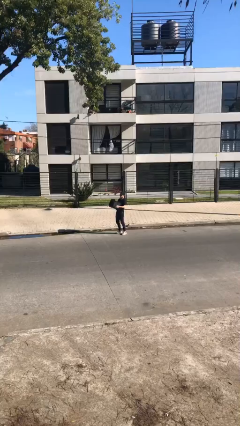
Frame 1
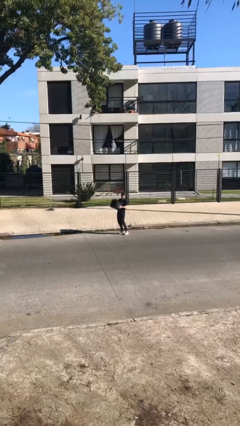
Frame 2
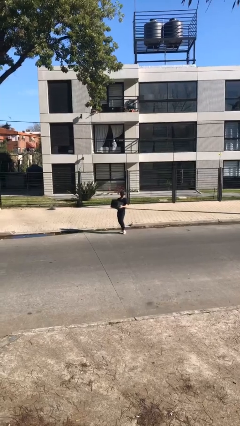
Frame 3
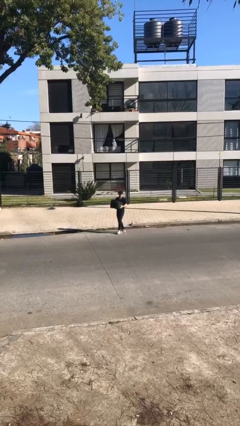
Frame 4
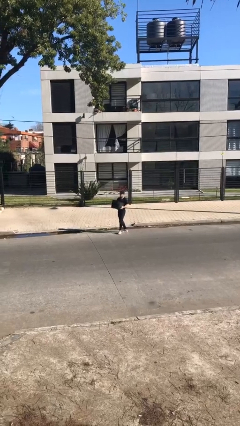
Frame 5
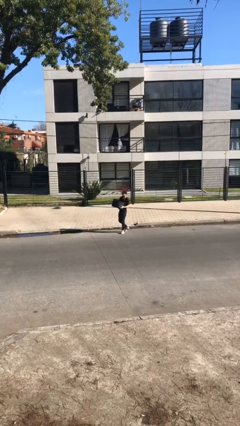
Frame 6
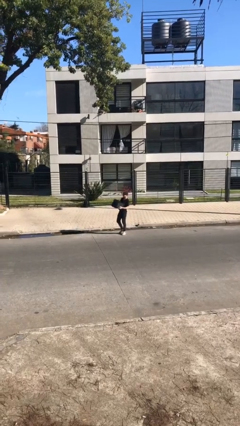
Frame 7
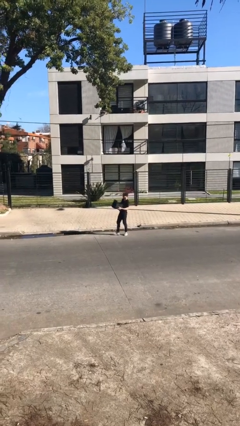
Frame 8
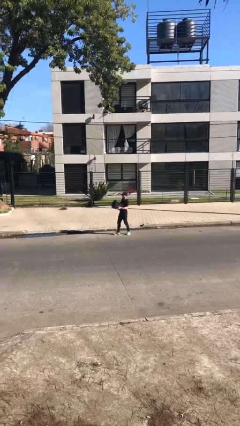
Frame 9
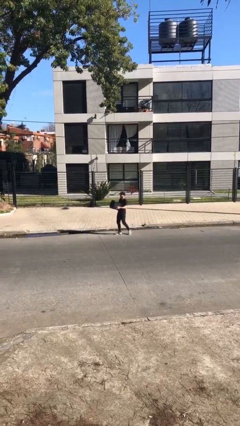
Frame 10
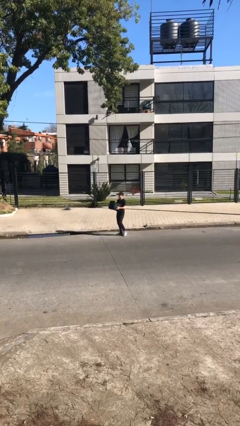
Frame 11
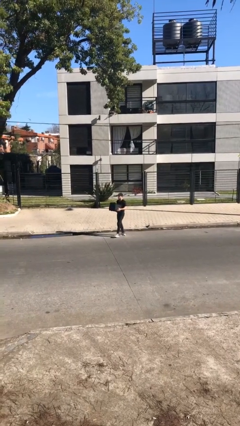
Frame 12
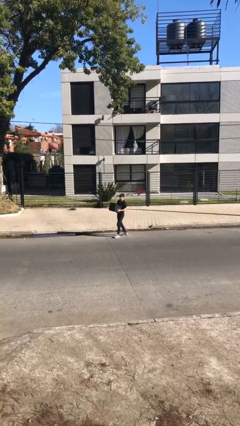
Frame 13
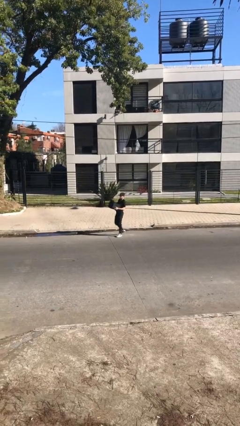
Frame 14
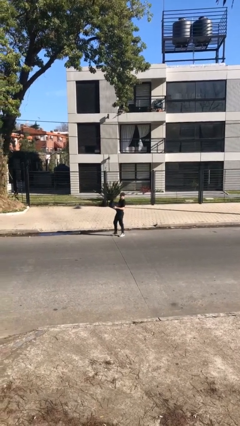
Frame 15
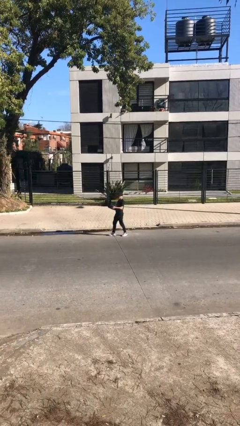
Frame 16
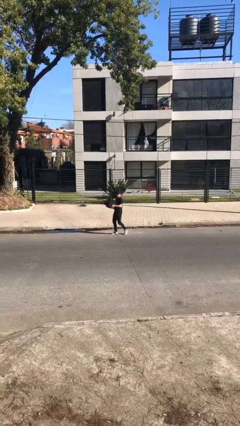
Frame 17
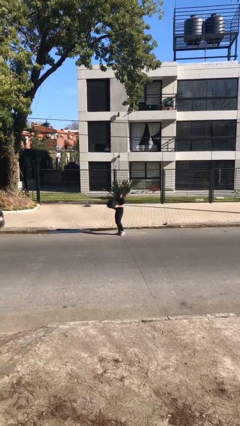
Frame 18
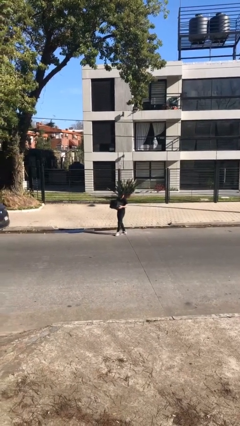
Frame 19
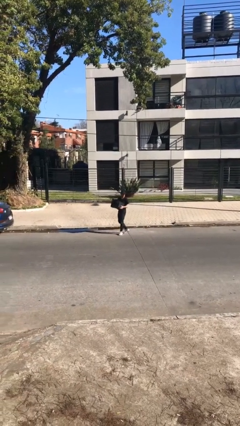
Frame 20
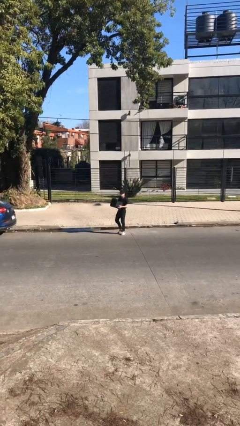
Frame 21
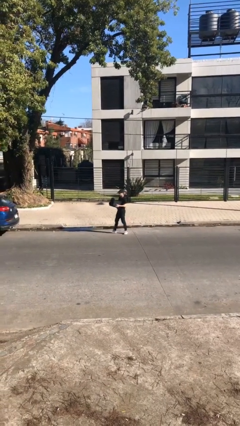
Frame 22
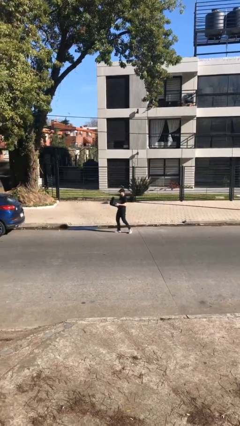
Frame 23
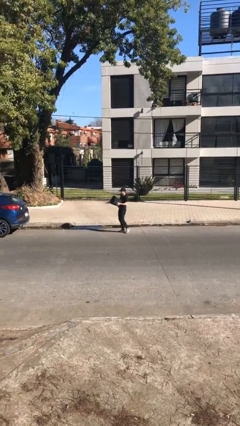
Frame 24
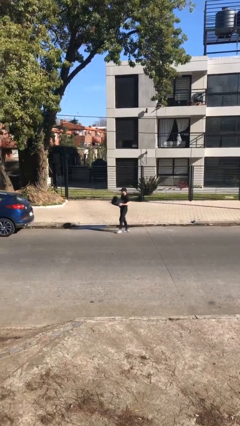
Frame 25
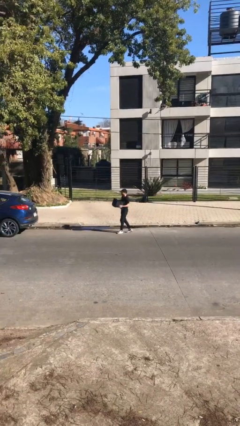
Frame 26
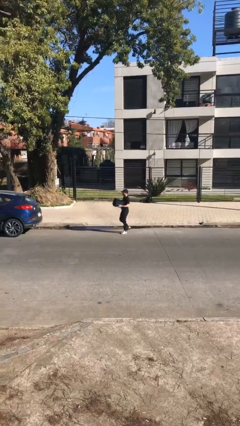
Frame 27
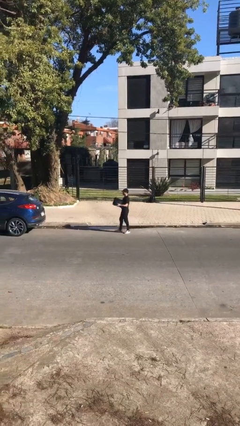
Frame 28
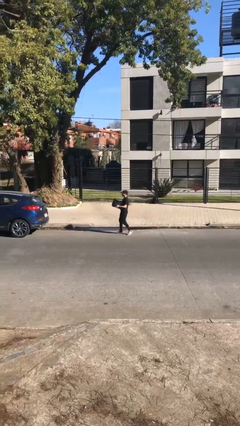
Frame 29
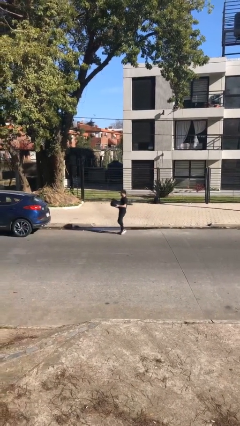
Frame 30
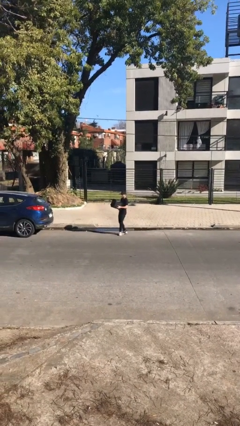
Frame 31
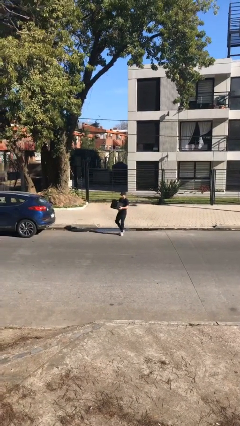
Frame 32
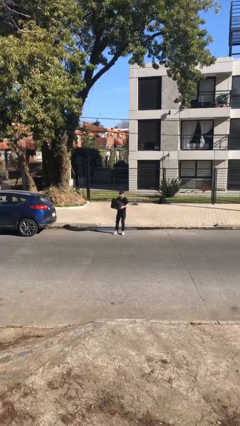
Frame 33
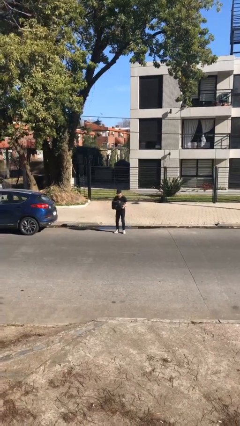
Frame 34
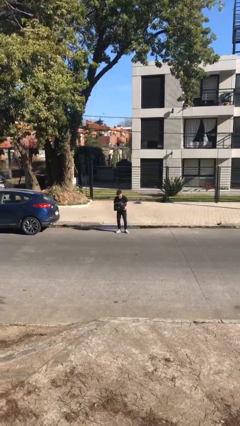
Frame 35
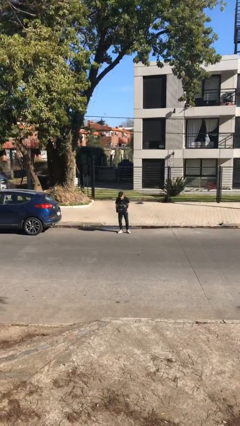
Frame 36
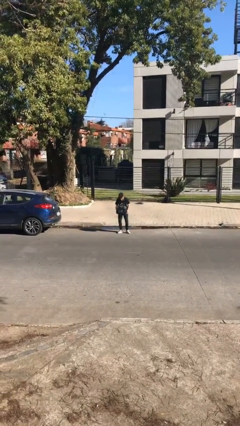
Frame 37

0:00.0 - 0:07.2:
person carries heavy object

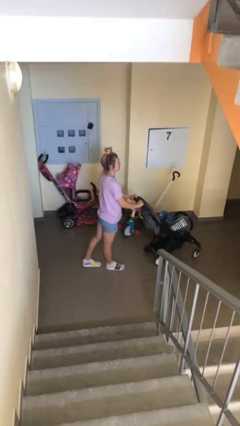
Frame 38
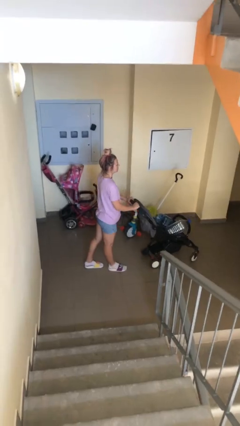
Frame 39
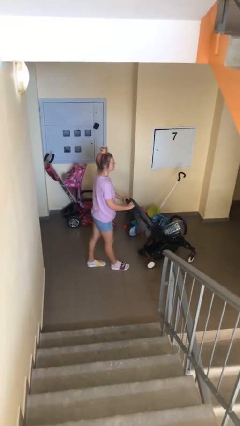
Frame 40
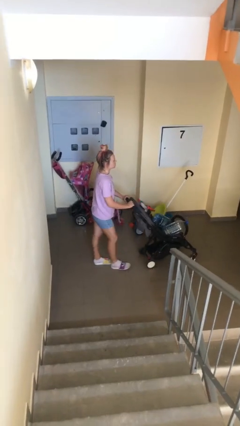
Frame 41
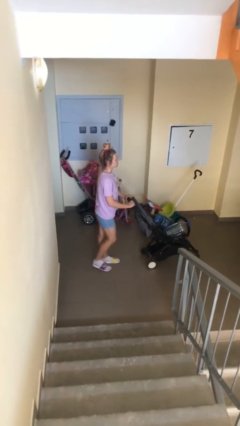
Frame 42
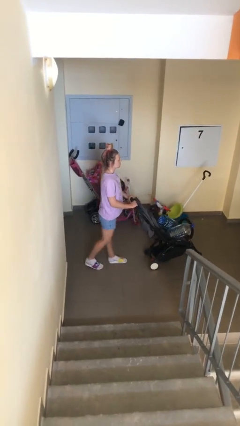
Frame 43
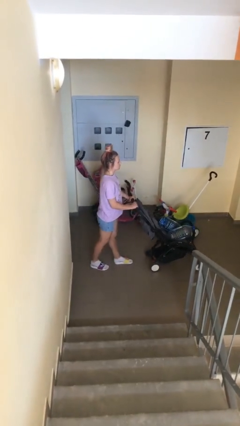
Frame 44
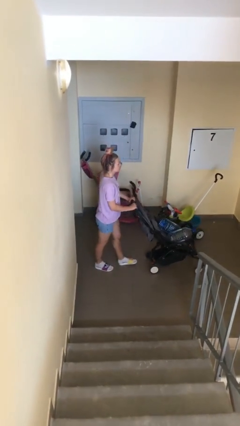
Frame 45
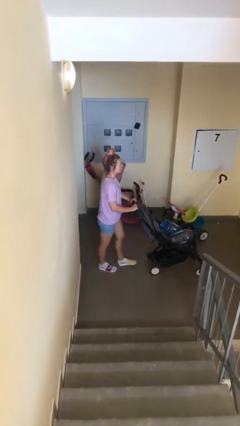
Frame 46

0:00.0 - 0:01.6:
person pulls wheeled cart

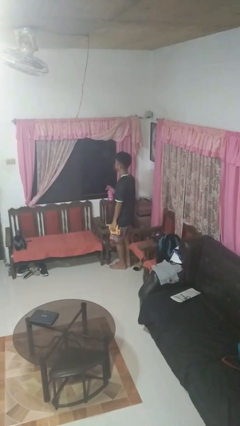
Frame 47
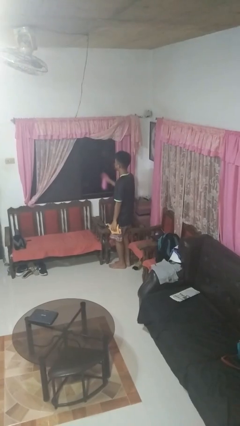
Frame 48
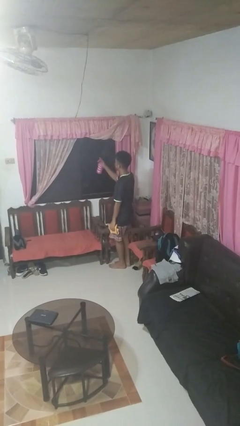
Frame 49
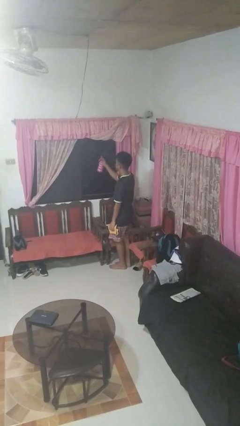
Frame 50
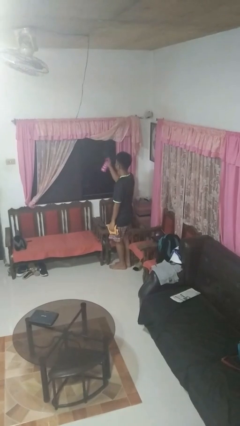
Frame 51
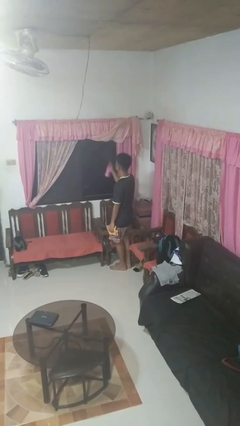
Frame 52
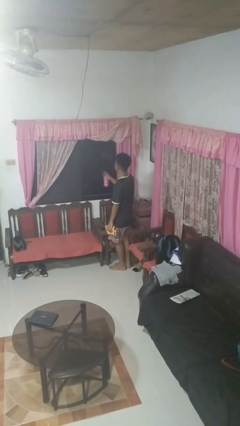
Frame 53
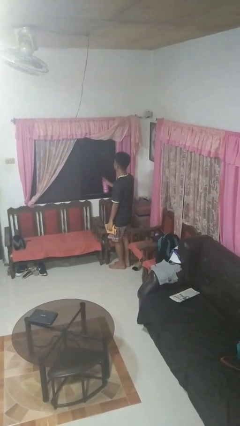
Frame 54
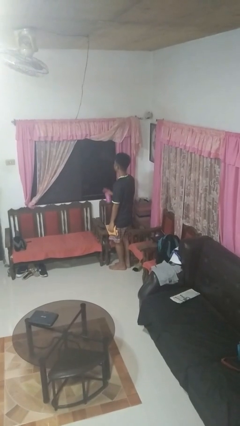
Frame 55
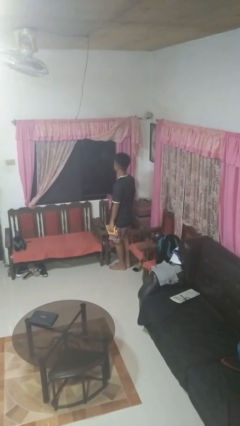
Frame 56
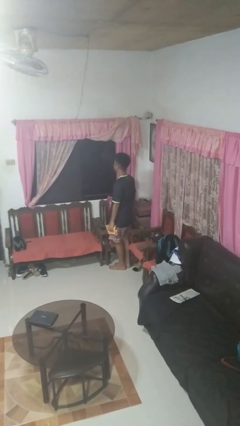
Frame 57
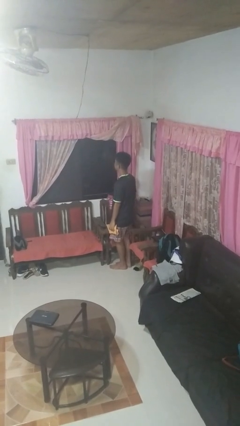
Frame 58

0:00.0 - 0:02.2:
person sprays from bottle

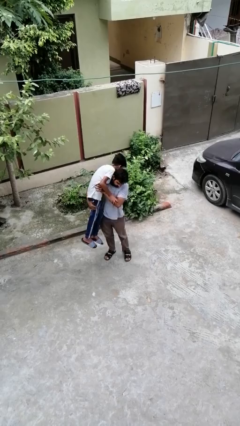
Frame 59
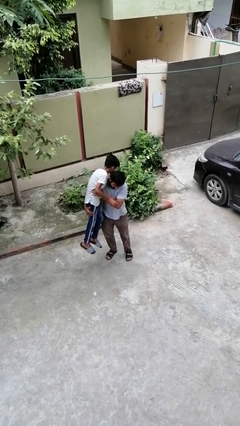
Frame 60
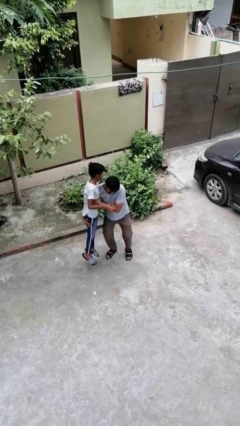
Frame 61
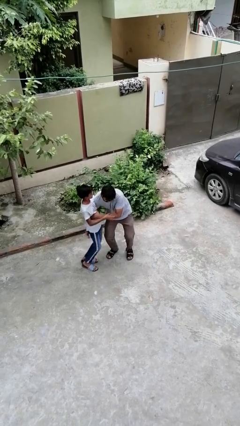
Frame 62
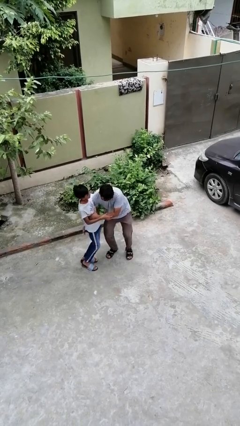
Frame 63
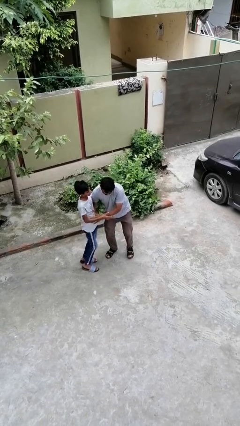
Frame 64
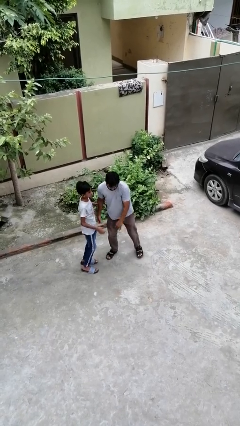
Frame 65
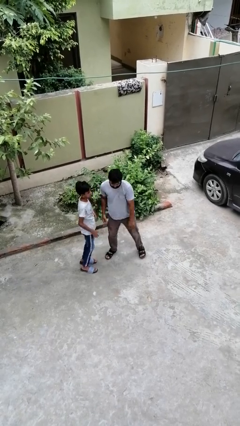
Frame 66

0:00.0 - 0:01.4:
person puts down person

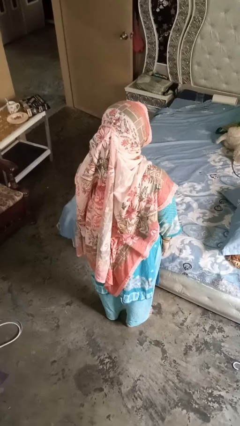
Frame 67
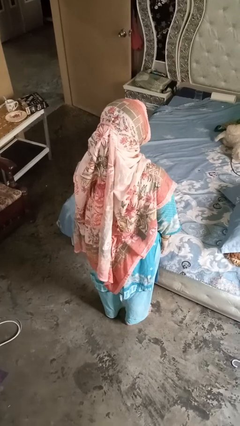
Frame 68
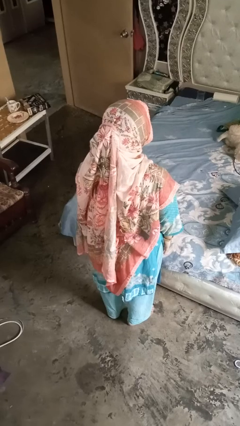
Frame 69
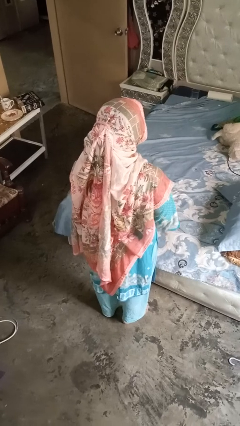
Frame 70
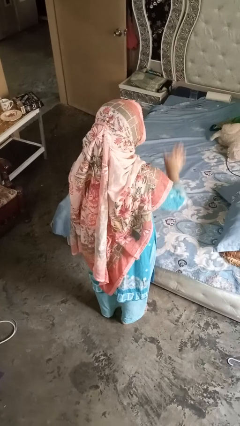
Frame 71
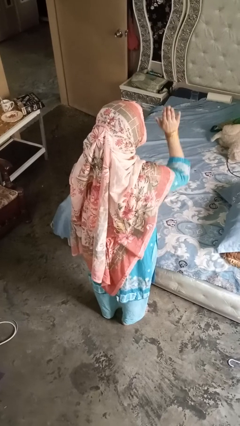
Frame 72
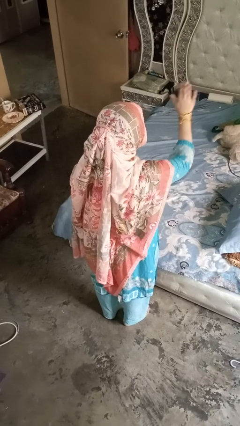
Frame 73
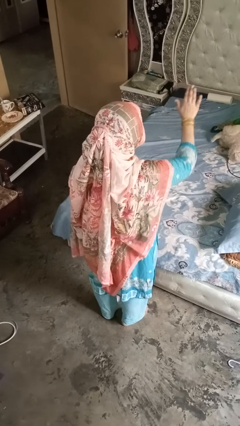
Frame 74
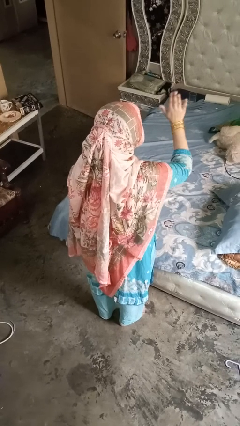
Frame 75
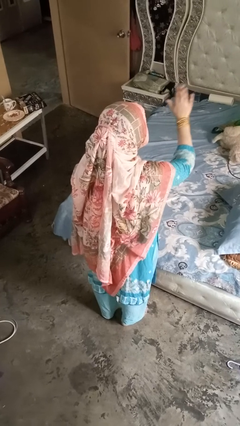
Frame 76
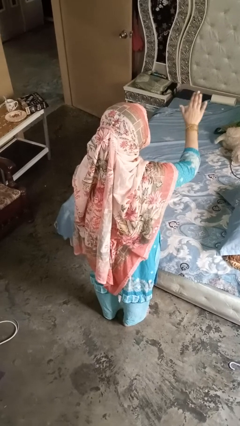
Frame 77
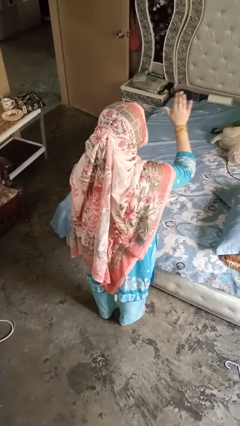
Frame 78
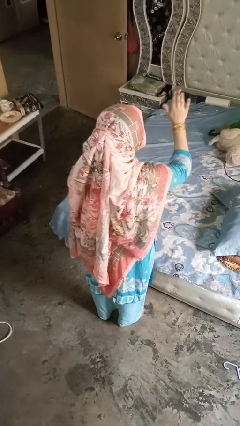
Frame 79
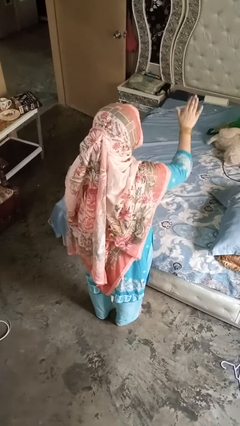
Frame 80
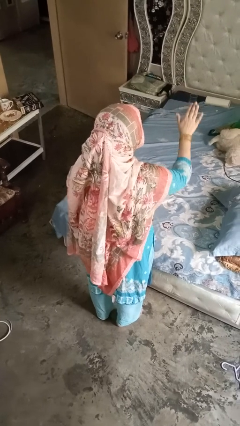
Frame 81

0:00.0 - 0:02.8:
person gestures stop

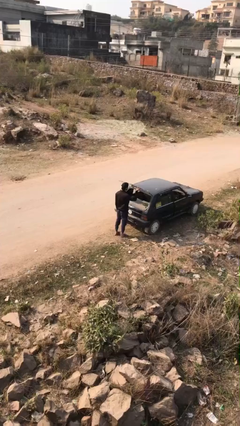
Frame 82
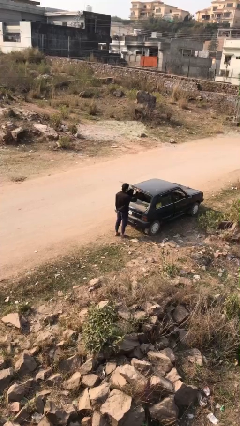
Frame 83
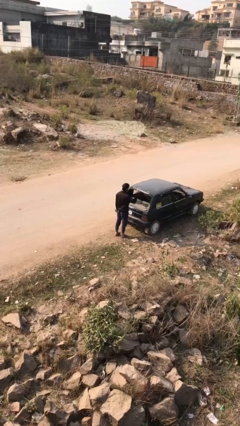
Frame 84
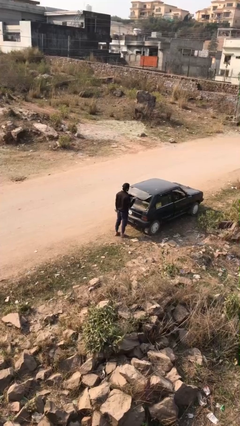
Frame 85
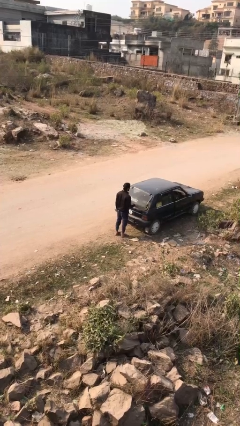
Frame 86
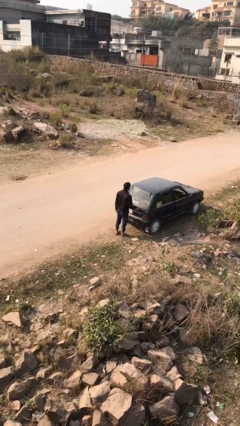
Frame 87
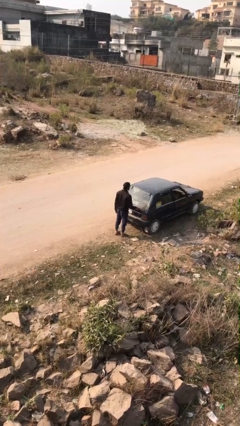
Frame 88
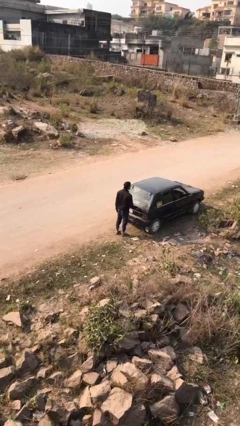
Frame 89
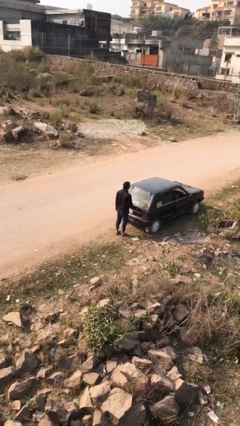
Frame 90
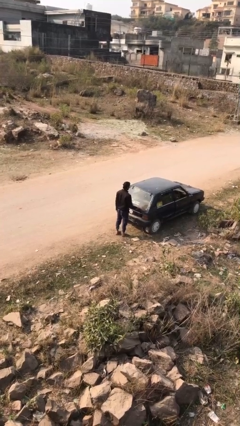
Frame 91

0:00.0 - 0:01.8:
person closes car trunk

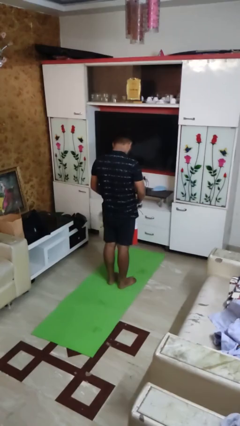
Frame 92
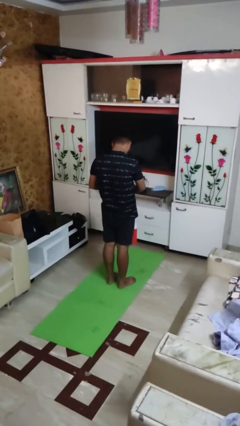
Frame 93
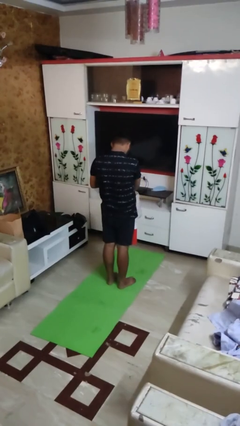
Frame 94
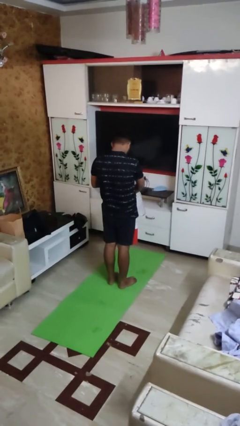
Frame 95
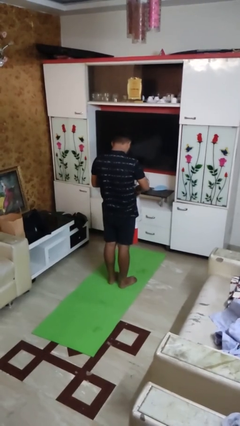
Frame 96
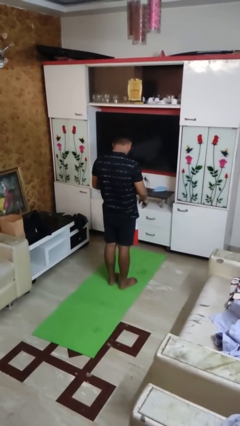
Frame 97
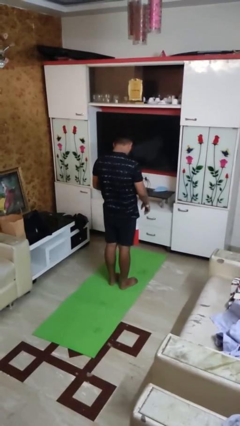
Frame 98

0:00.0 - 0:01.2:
person puts object into basket
